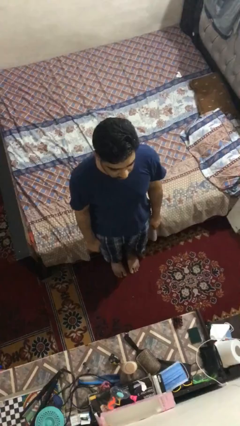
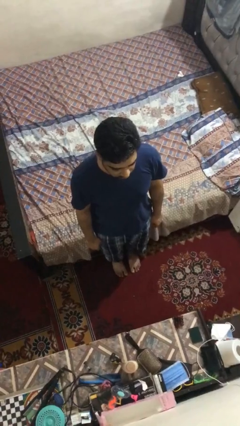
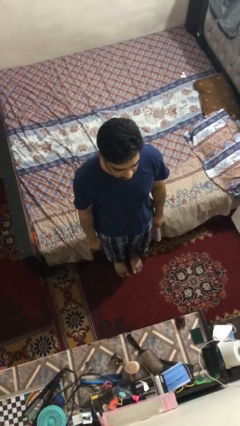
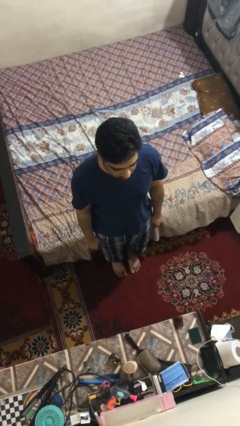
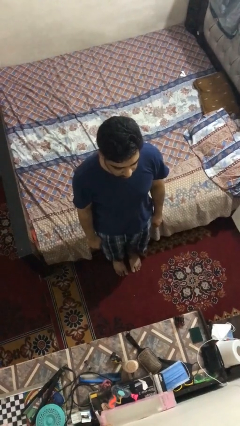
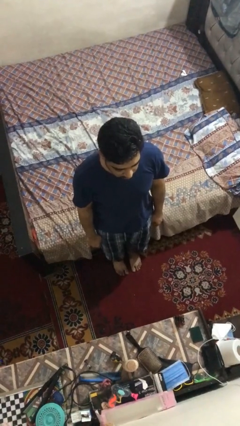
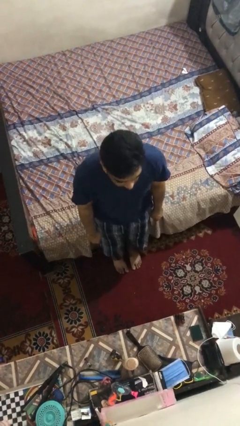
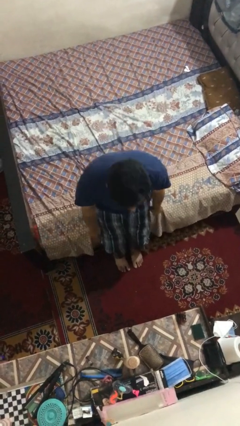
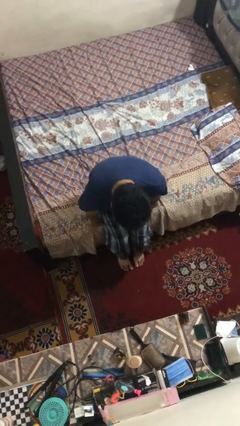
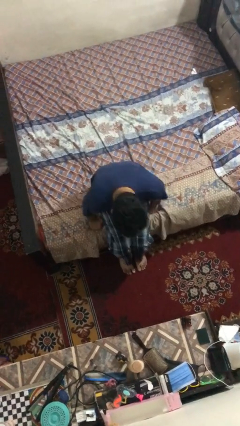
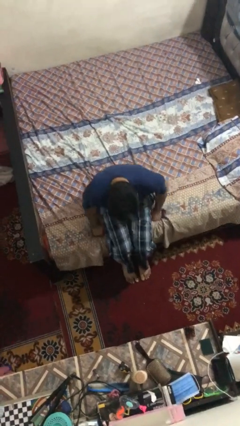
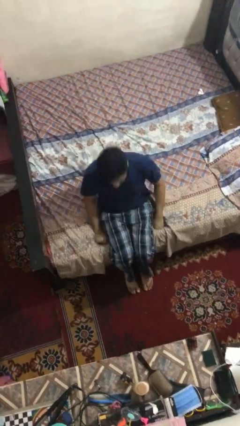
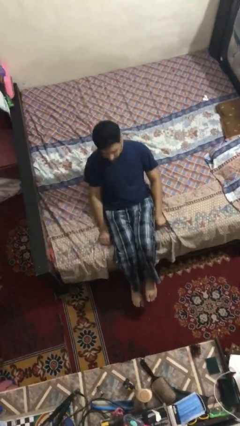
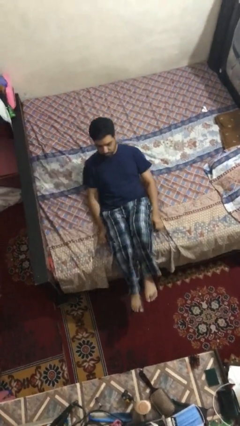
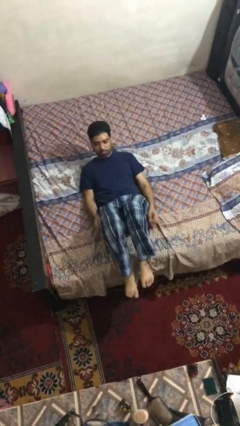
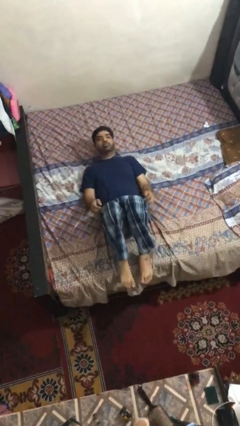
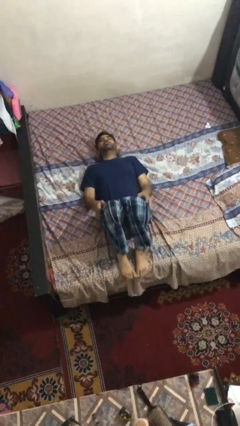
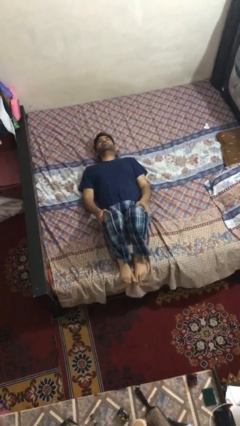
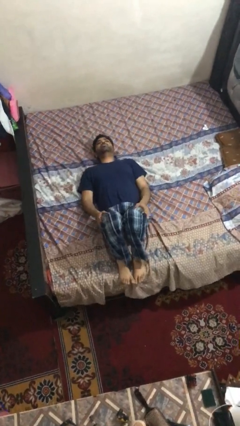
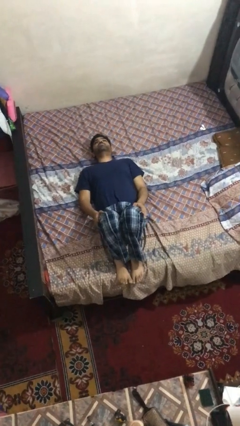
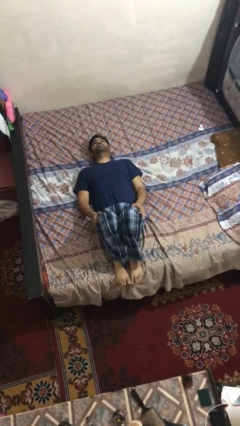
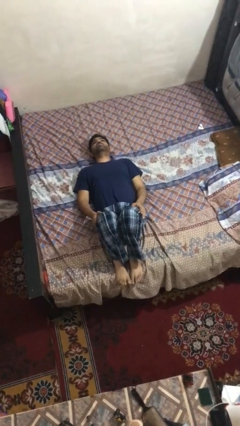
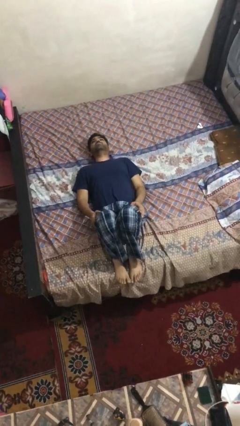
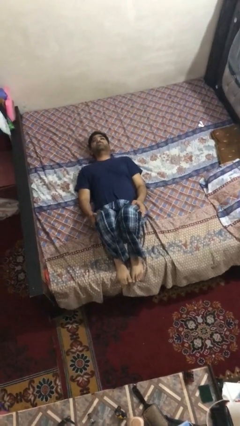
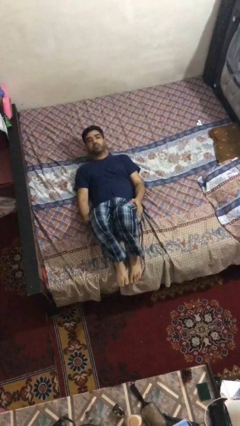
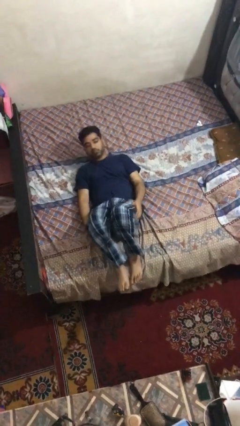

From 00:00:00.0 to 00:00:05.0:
person lies down on bed

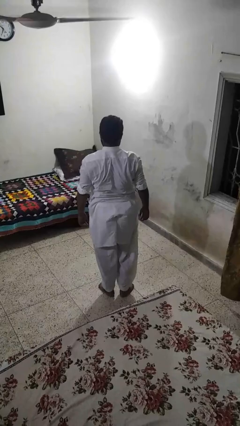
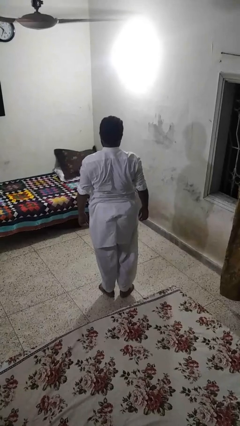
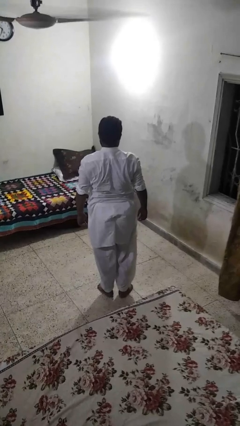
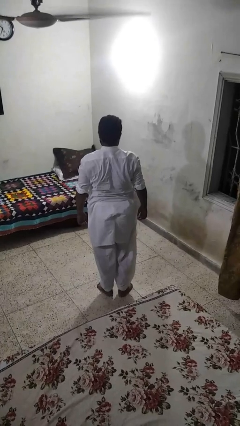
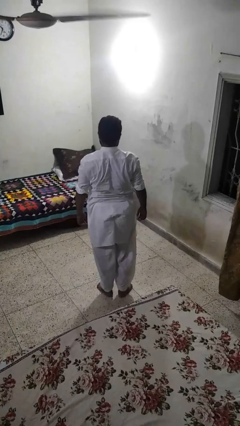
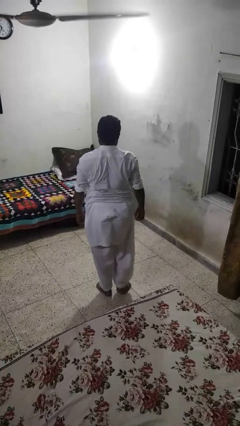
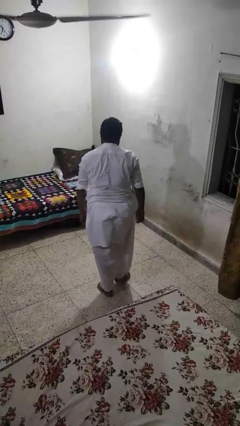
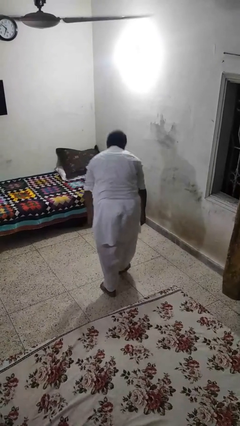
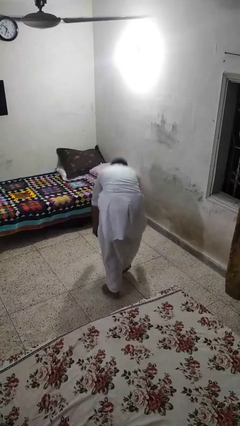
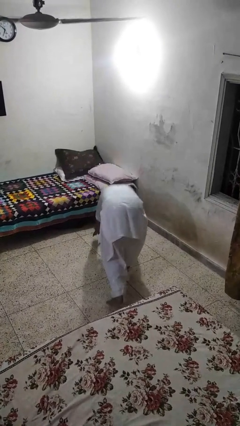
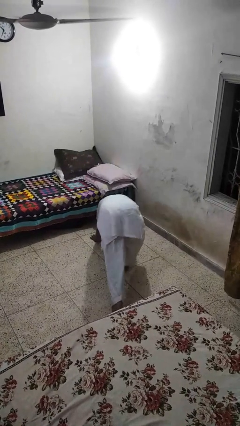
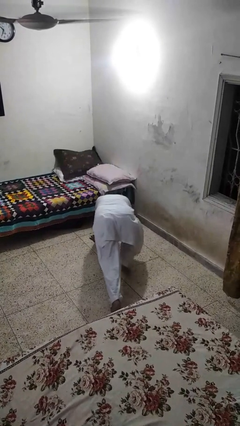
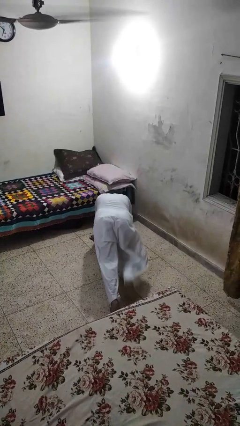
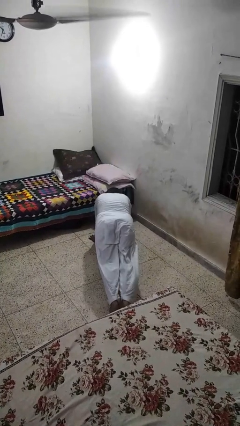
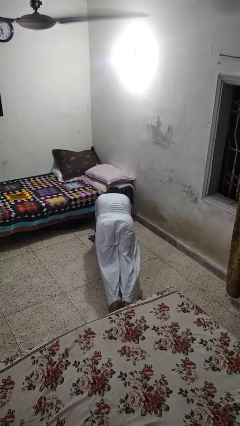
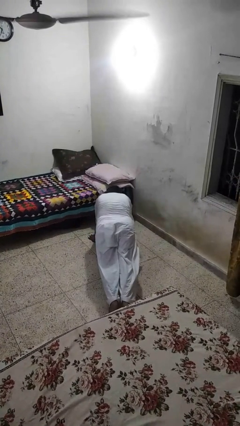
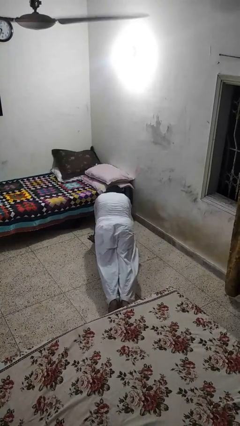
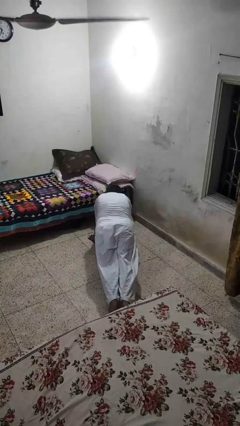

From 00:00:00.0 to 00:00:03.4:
person exercises with plank

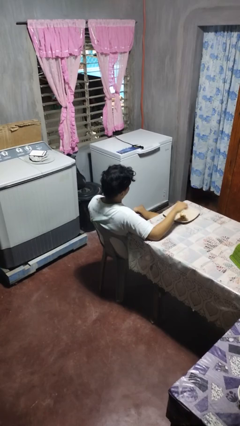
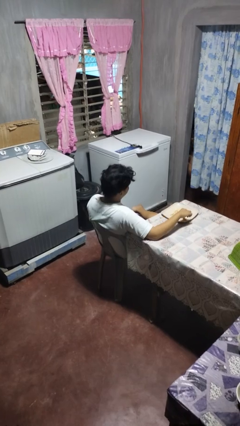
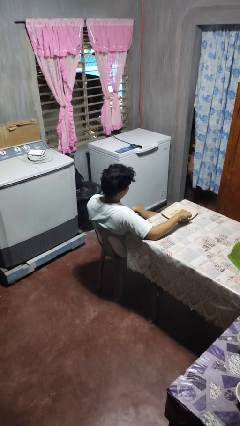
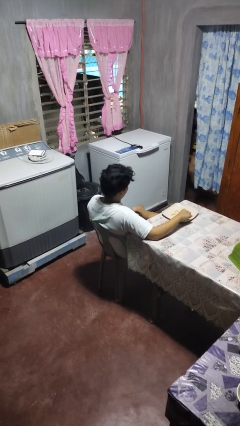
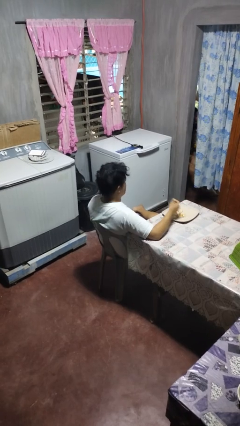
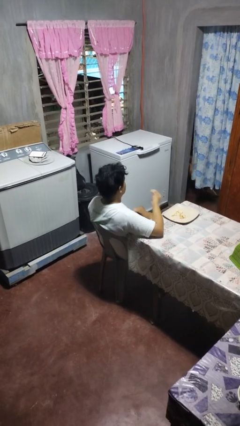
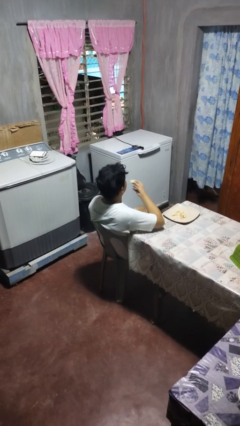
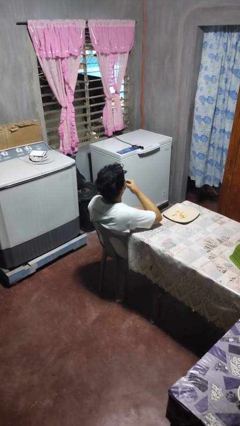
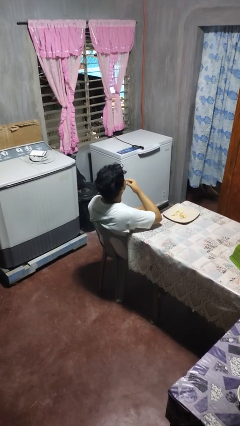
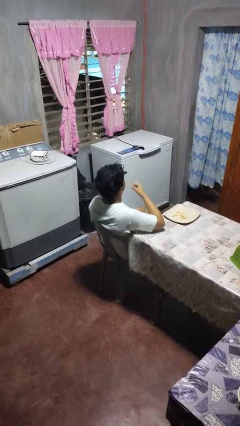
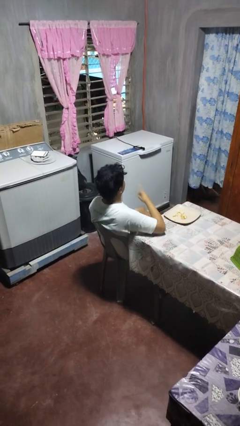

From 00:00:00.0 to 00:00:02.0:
person eats with hands

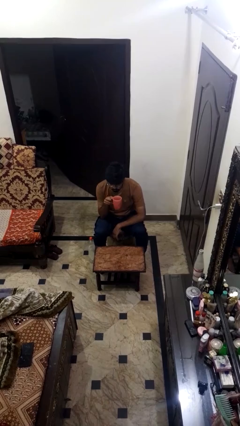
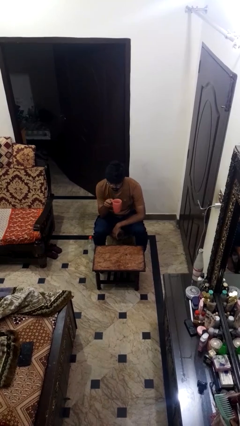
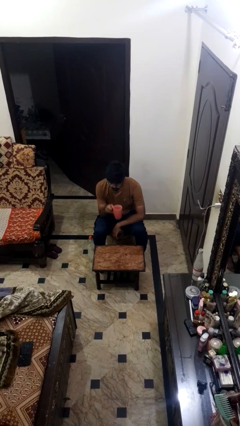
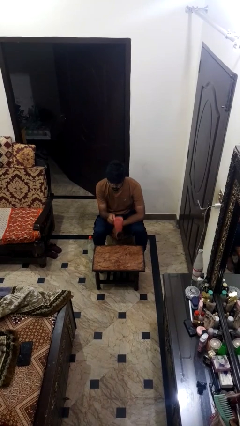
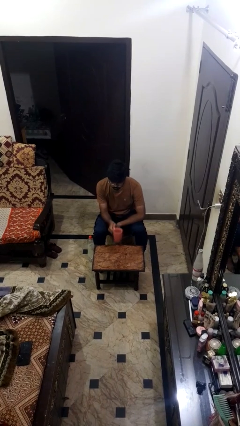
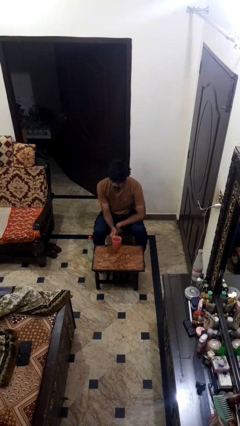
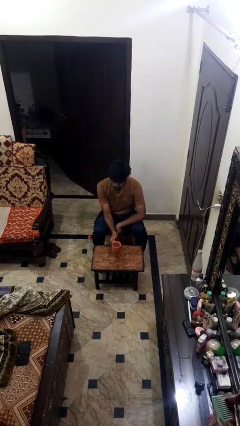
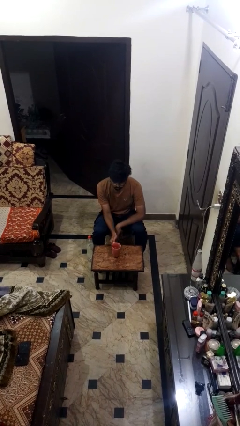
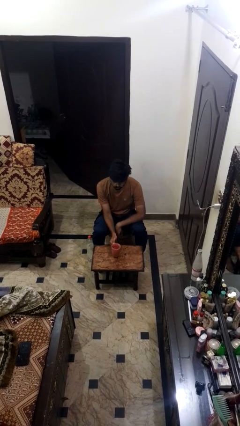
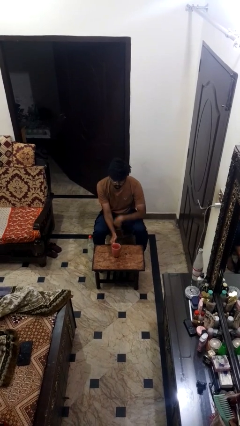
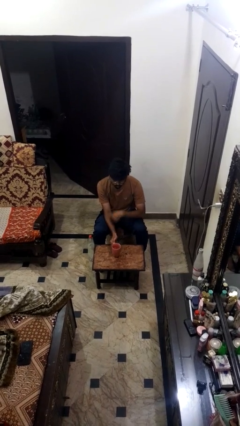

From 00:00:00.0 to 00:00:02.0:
person puts down object on table

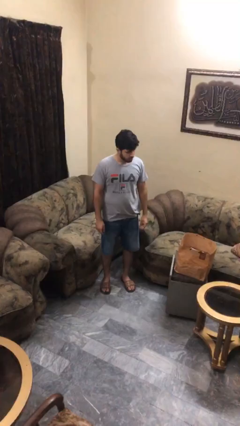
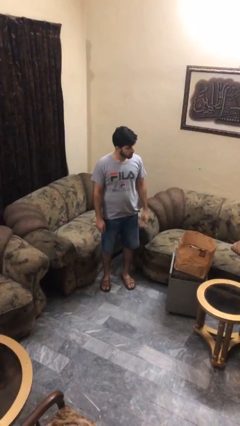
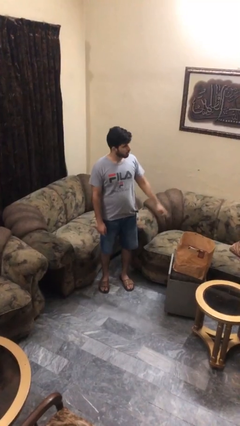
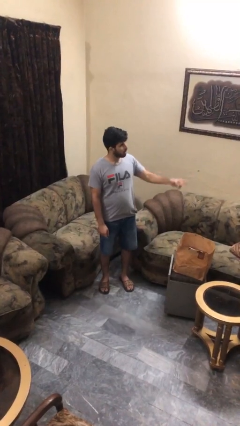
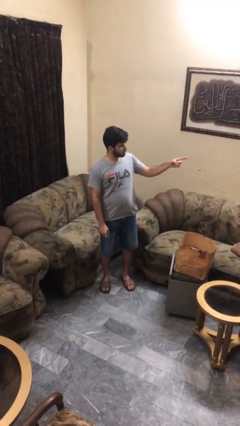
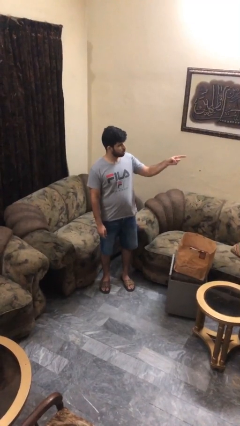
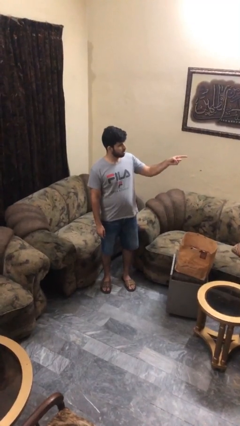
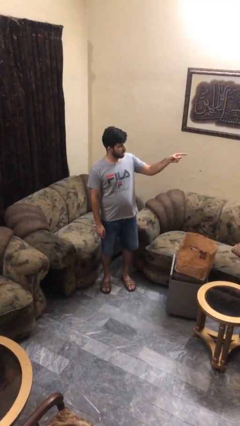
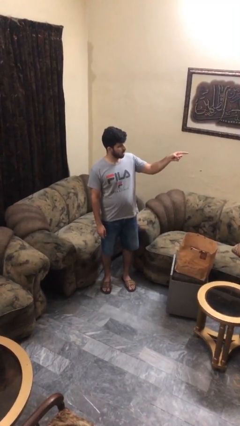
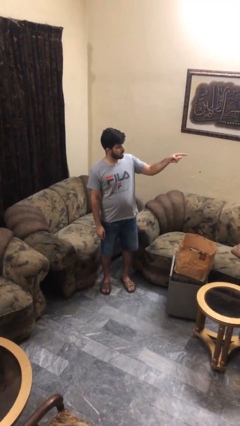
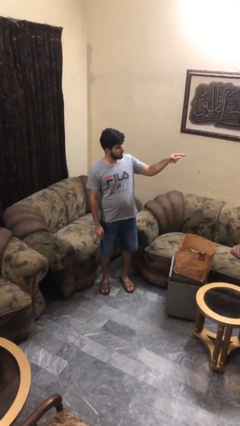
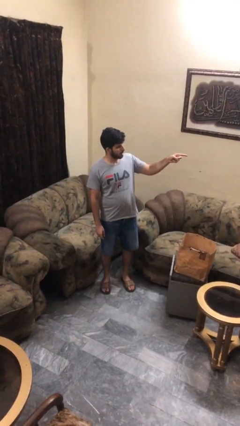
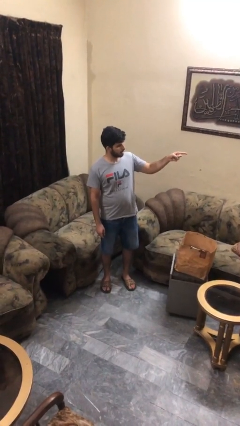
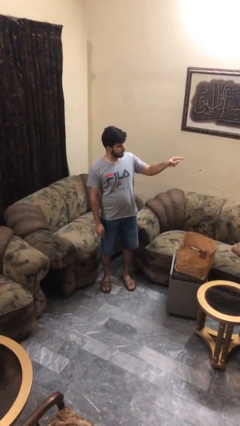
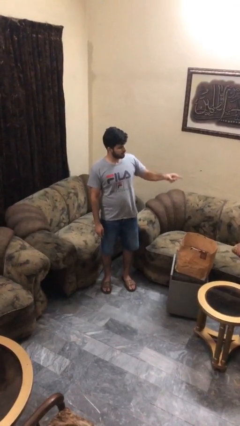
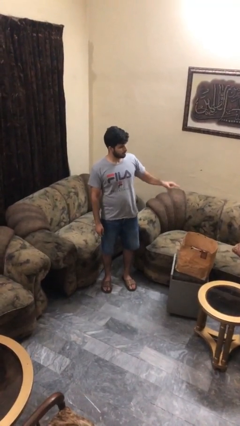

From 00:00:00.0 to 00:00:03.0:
person points at person

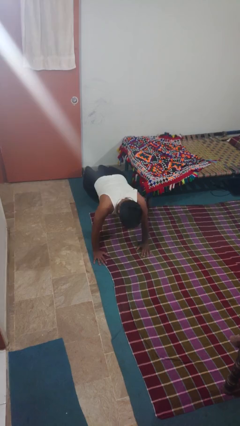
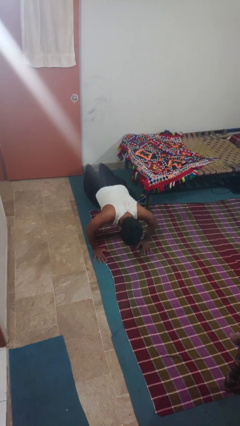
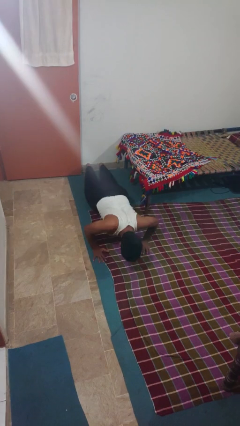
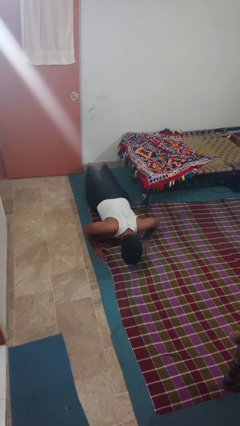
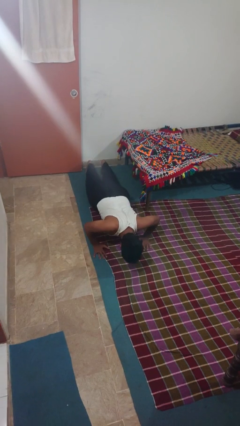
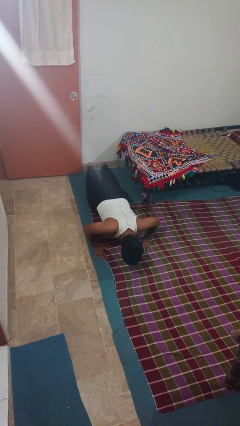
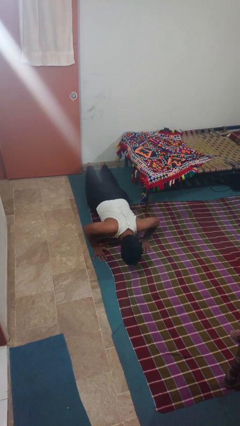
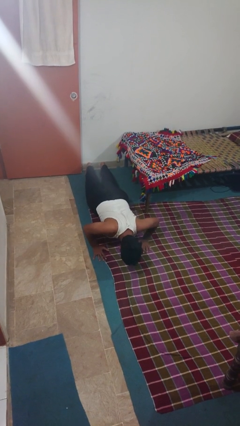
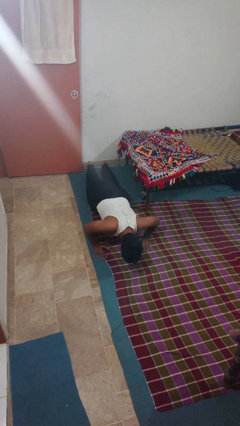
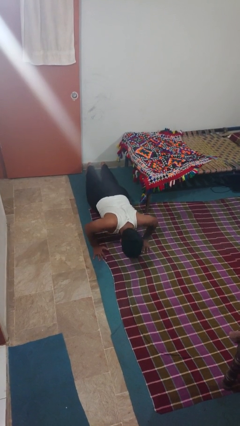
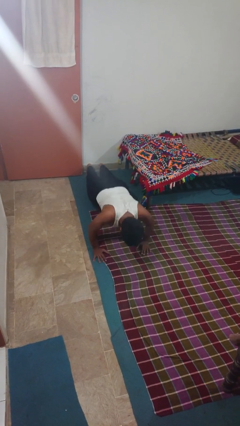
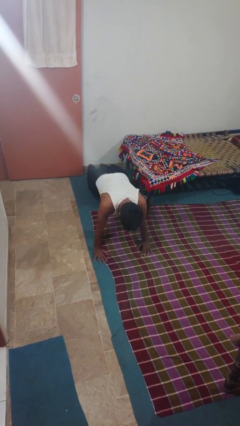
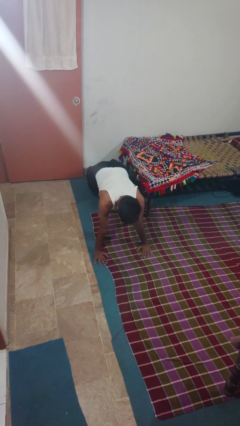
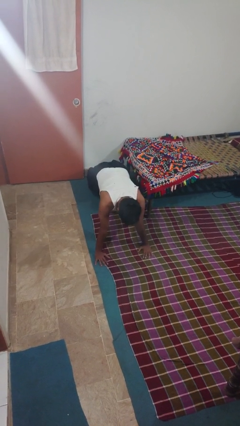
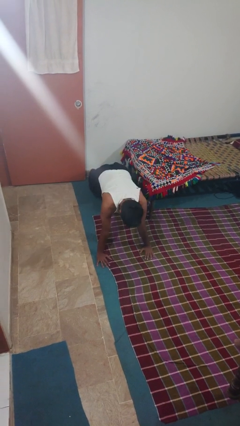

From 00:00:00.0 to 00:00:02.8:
person exercises with pushup
